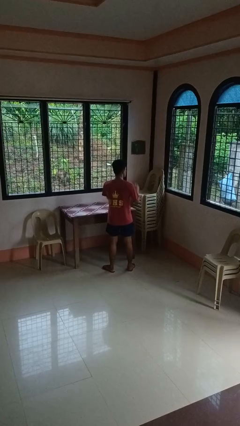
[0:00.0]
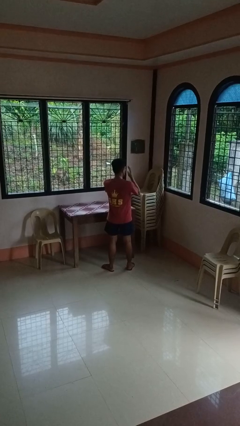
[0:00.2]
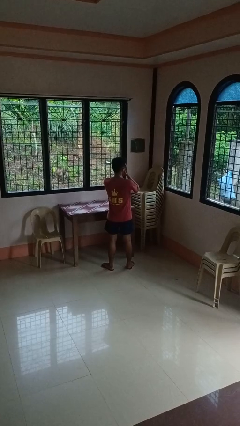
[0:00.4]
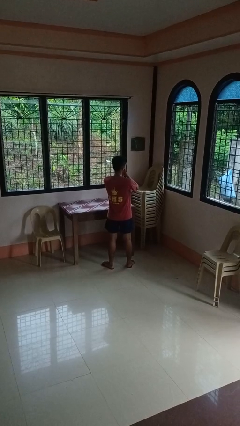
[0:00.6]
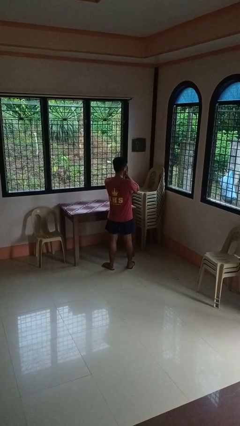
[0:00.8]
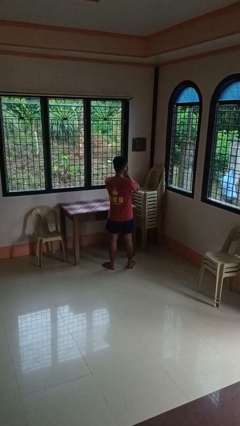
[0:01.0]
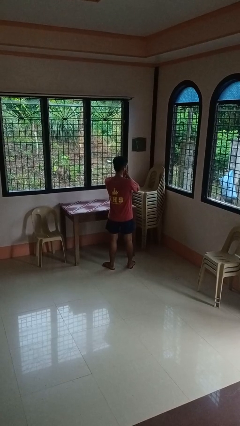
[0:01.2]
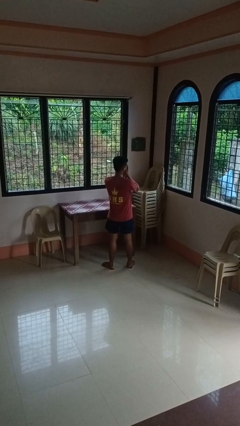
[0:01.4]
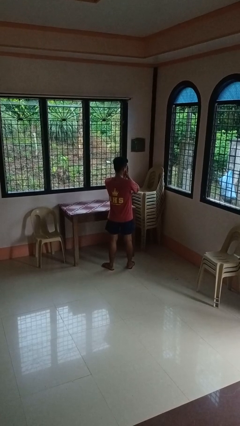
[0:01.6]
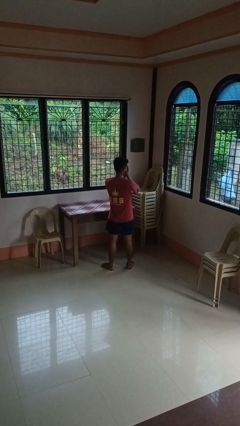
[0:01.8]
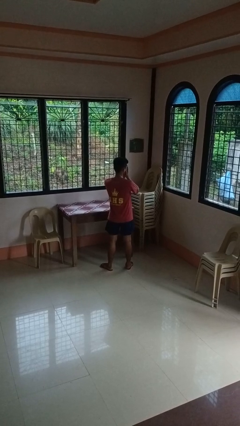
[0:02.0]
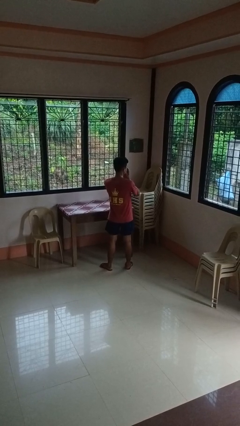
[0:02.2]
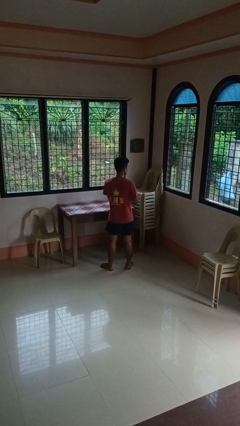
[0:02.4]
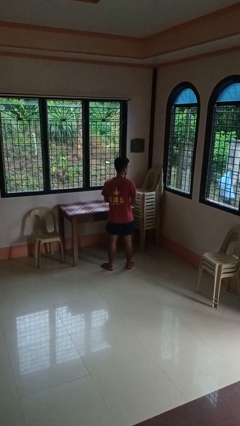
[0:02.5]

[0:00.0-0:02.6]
person covers face with hands

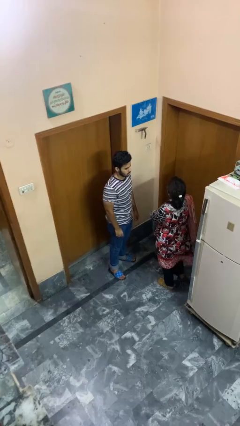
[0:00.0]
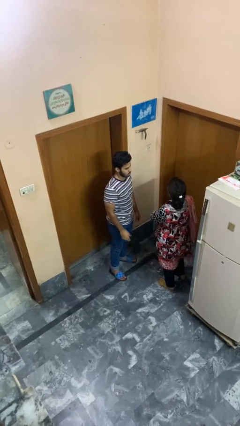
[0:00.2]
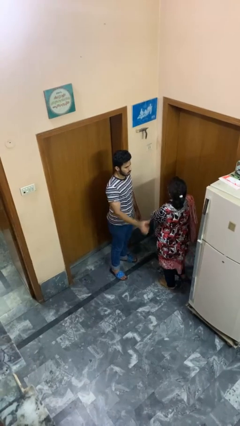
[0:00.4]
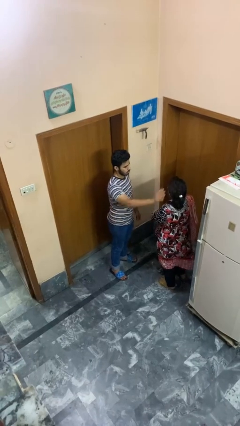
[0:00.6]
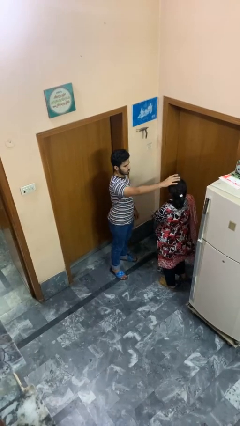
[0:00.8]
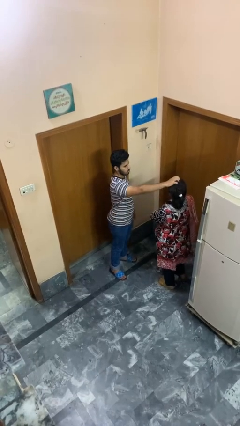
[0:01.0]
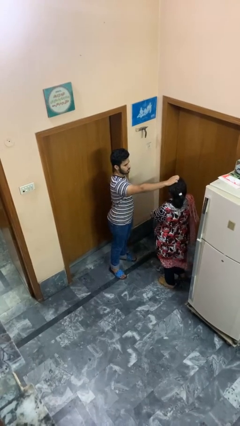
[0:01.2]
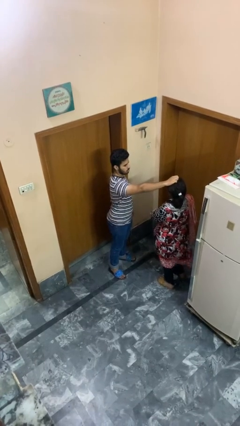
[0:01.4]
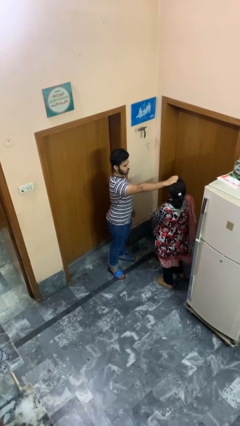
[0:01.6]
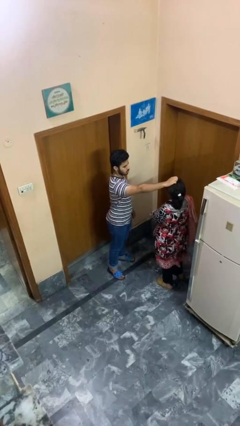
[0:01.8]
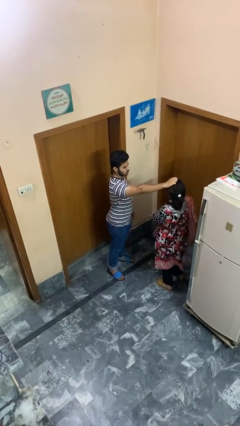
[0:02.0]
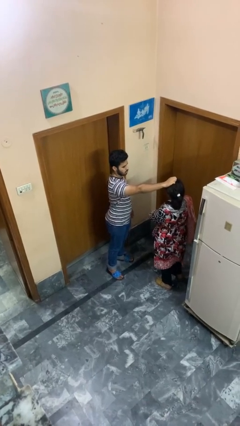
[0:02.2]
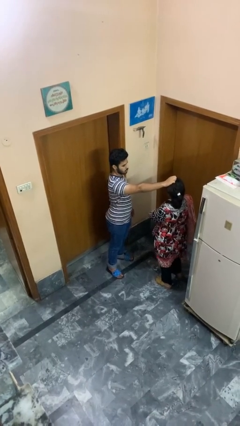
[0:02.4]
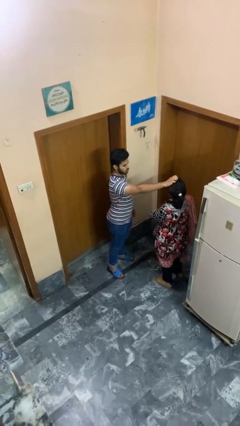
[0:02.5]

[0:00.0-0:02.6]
person grabs person by hair

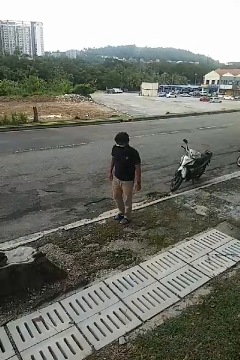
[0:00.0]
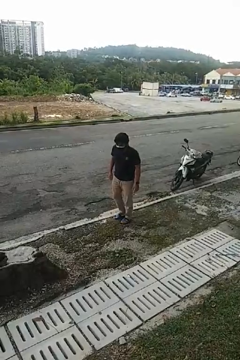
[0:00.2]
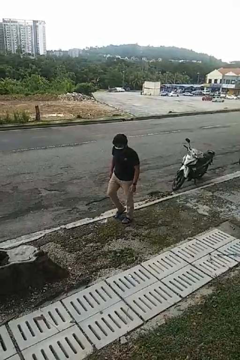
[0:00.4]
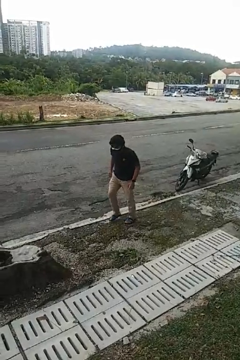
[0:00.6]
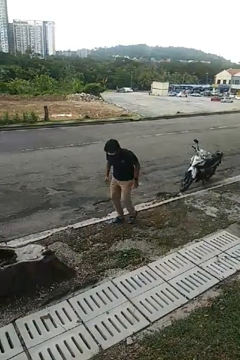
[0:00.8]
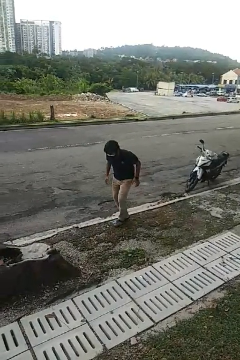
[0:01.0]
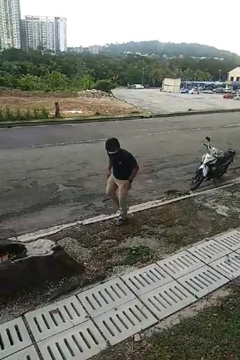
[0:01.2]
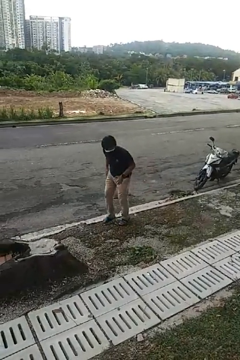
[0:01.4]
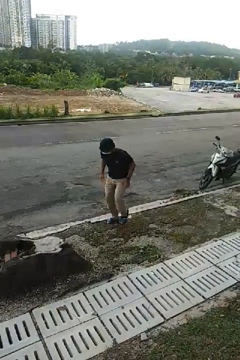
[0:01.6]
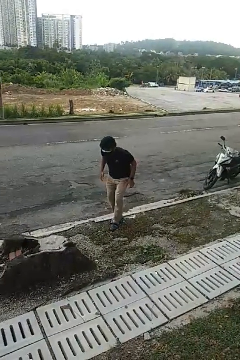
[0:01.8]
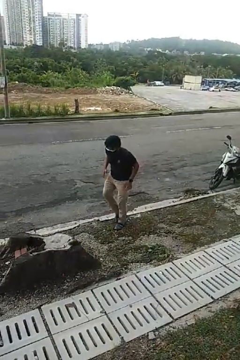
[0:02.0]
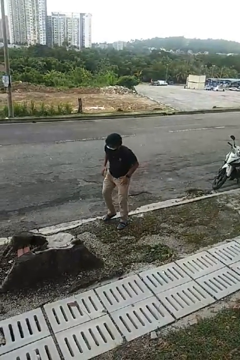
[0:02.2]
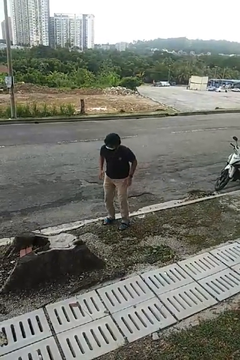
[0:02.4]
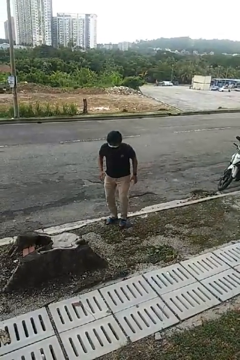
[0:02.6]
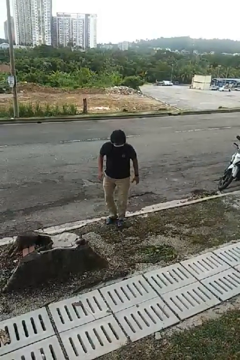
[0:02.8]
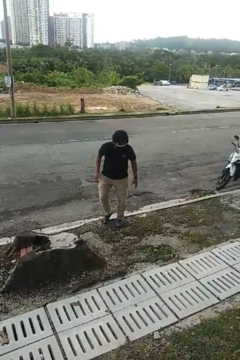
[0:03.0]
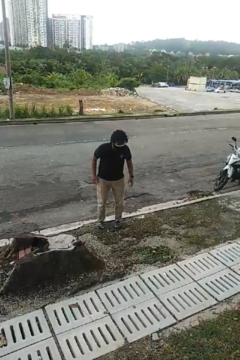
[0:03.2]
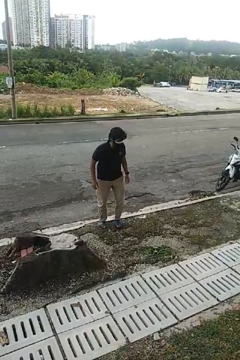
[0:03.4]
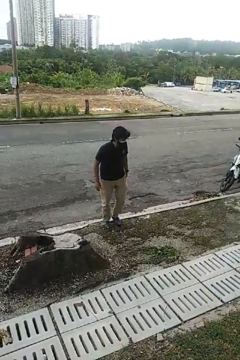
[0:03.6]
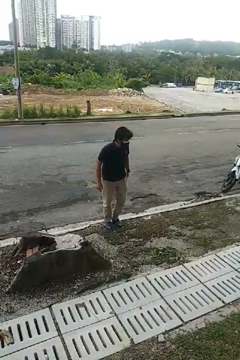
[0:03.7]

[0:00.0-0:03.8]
person walks tiptoe

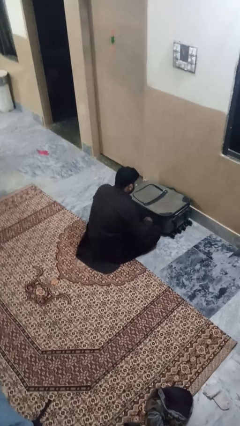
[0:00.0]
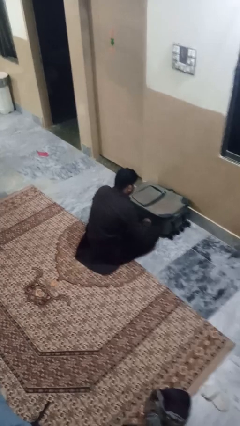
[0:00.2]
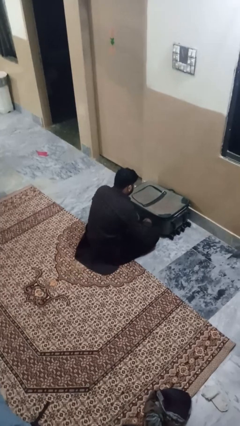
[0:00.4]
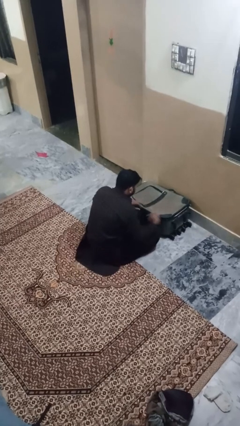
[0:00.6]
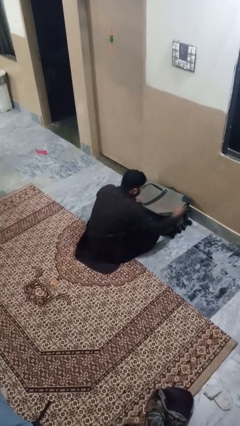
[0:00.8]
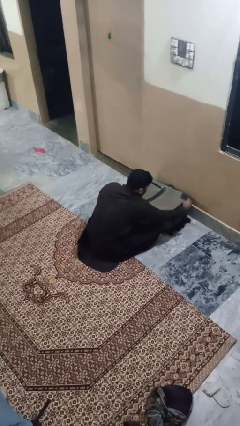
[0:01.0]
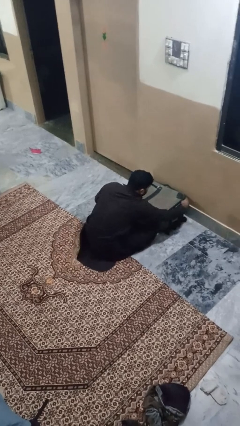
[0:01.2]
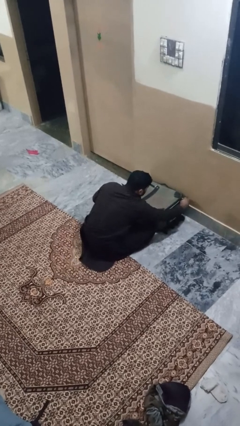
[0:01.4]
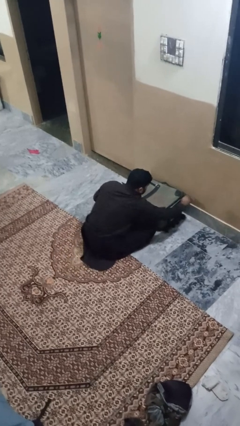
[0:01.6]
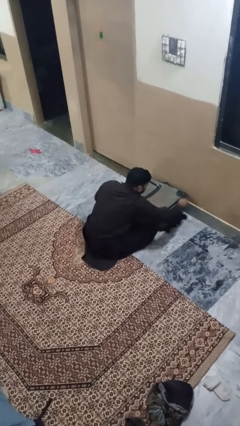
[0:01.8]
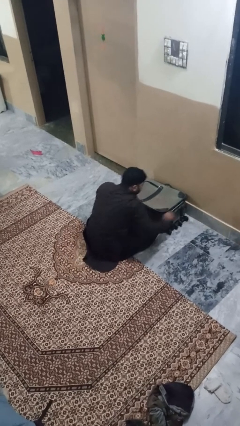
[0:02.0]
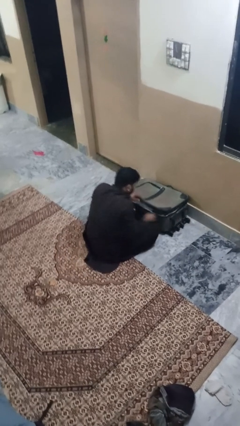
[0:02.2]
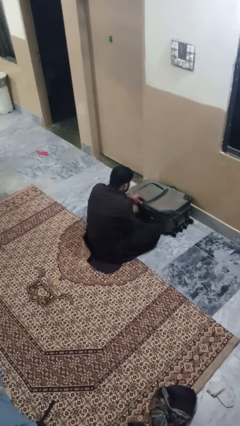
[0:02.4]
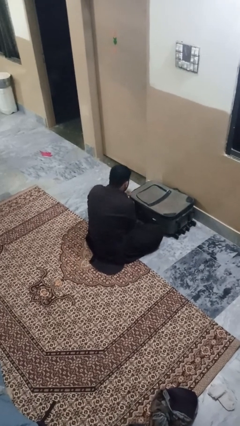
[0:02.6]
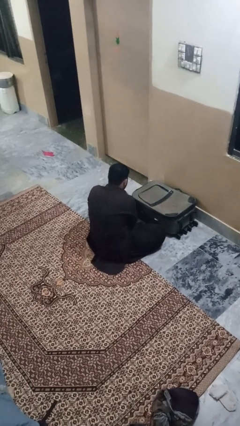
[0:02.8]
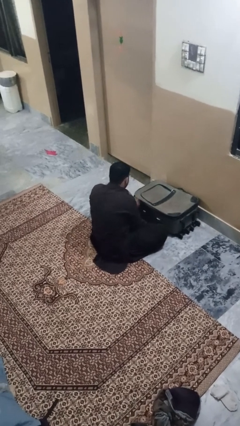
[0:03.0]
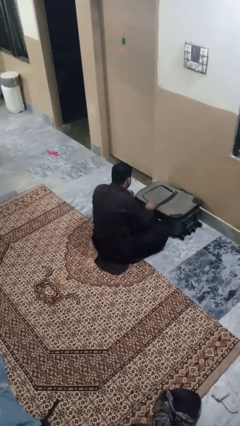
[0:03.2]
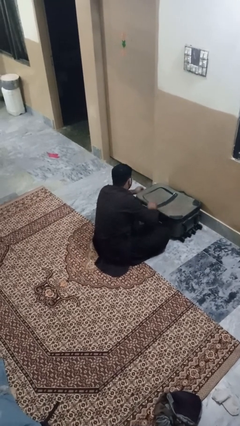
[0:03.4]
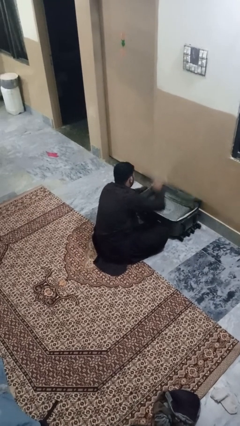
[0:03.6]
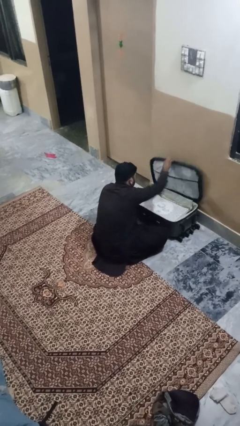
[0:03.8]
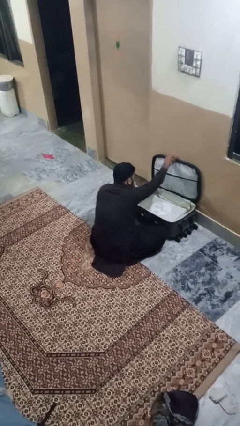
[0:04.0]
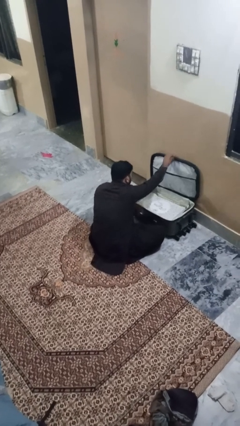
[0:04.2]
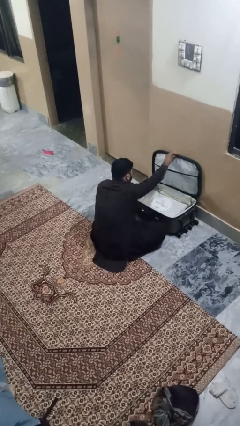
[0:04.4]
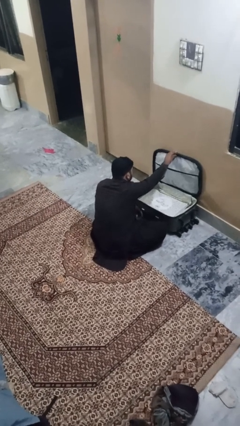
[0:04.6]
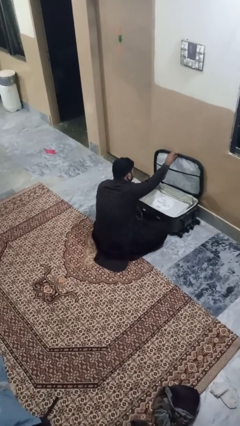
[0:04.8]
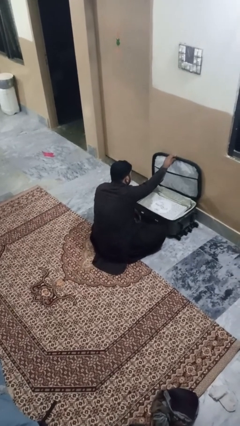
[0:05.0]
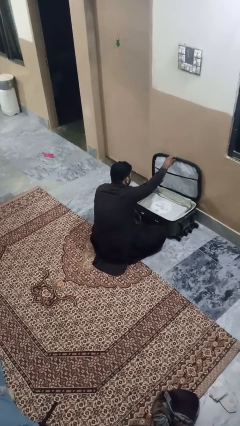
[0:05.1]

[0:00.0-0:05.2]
person opens suitcase

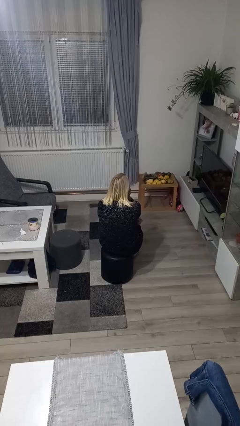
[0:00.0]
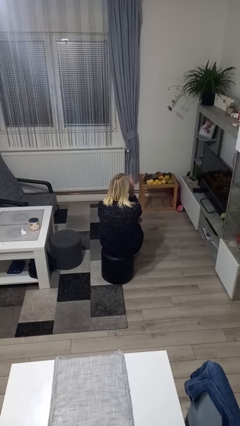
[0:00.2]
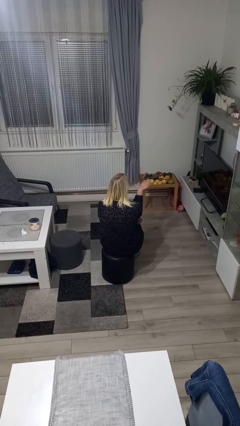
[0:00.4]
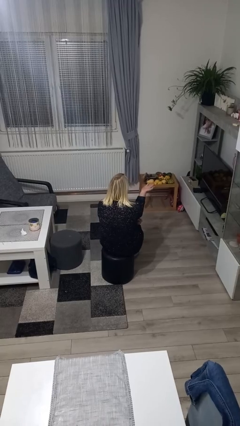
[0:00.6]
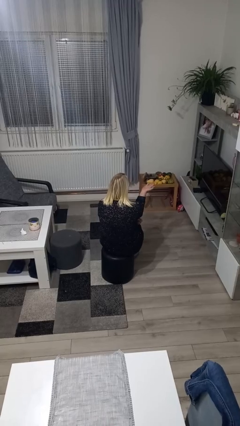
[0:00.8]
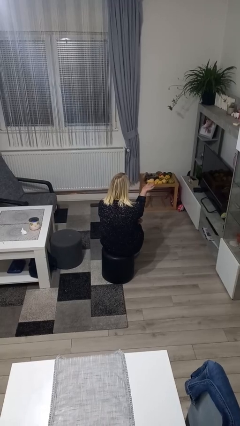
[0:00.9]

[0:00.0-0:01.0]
person gestures blow kiss

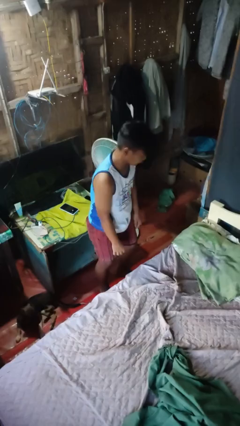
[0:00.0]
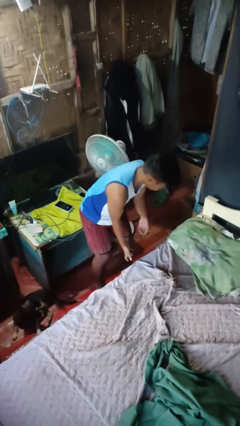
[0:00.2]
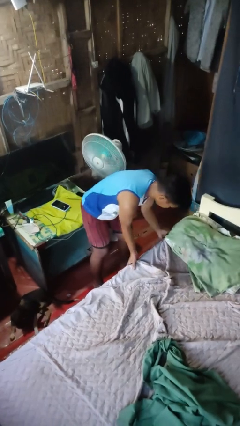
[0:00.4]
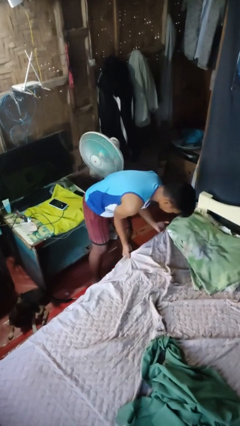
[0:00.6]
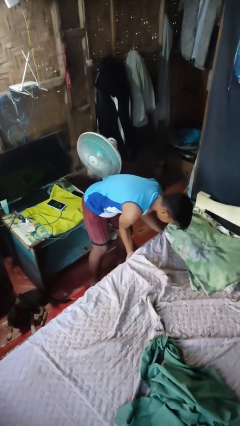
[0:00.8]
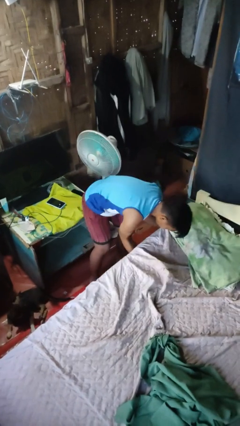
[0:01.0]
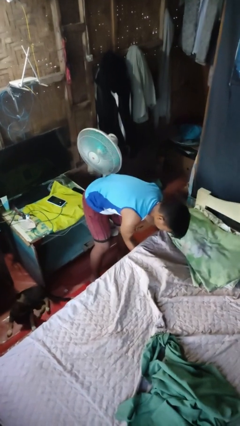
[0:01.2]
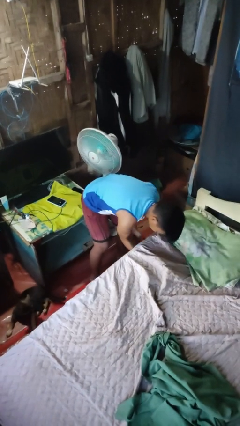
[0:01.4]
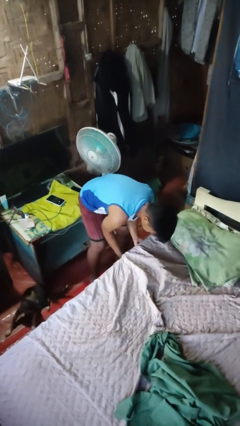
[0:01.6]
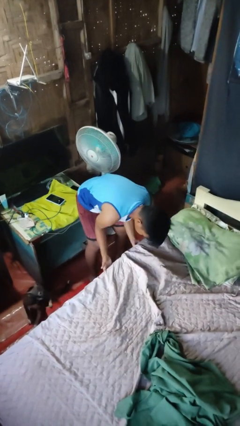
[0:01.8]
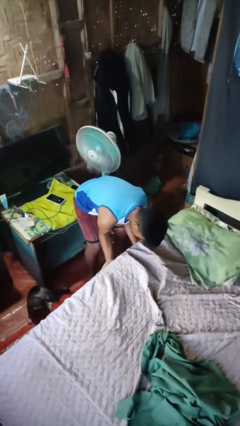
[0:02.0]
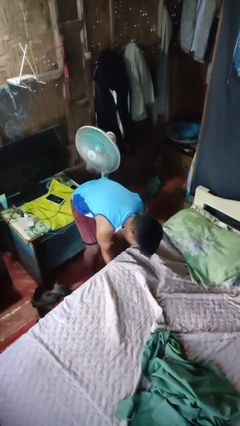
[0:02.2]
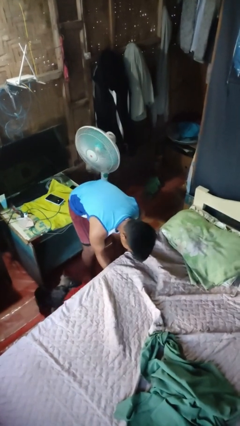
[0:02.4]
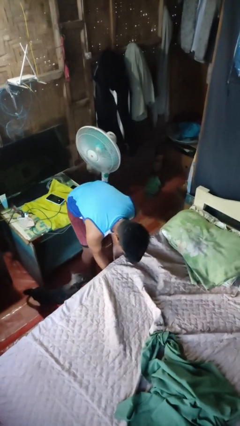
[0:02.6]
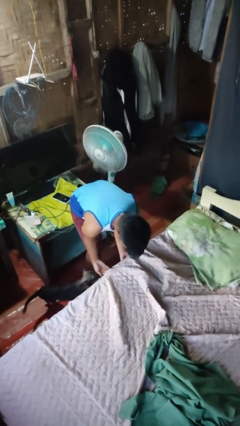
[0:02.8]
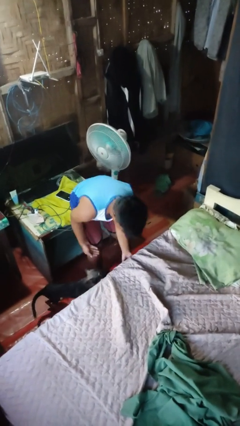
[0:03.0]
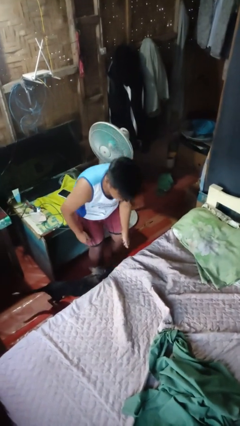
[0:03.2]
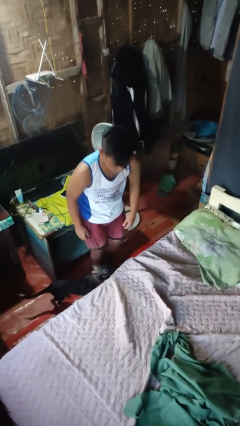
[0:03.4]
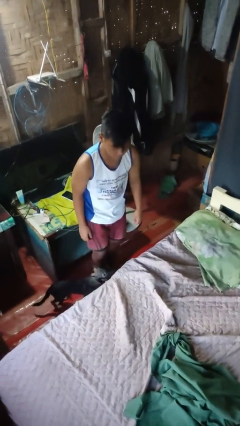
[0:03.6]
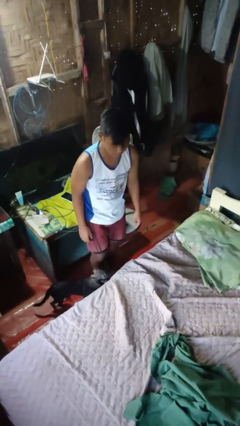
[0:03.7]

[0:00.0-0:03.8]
person makes bed
